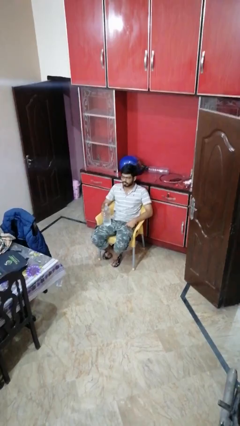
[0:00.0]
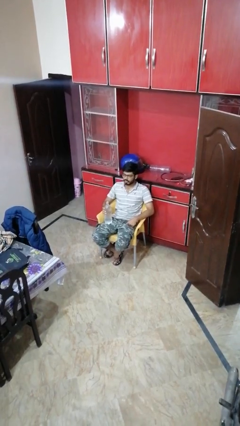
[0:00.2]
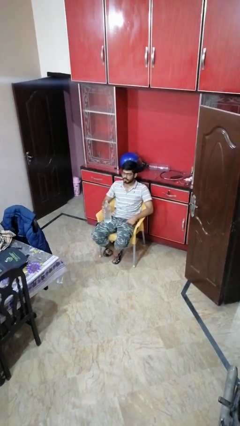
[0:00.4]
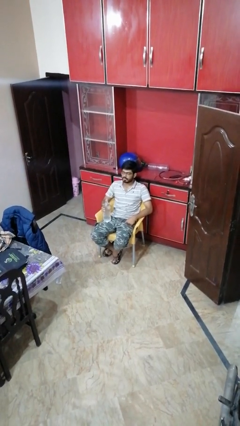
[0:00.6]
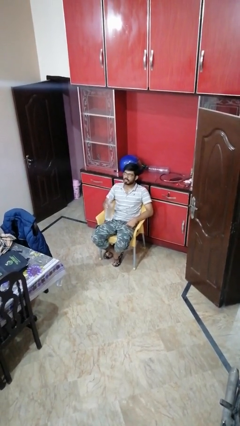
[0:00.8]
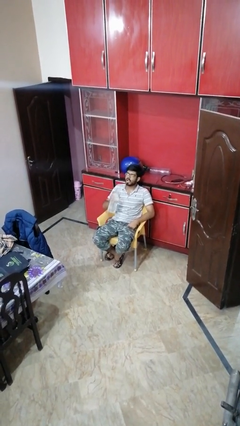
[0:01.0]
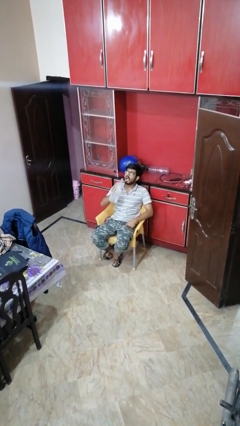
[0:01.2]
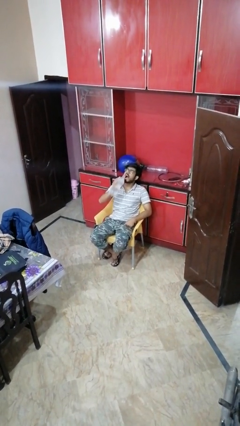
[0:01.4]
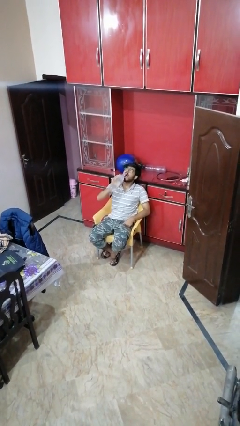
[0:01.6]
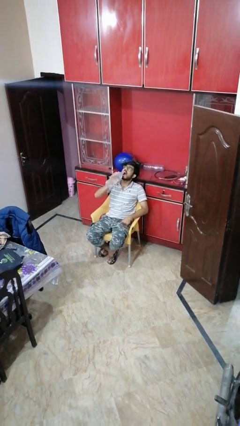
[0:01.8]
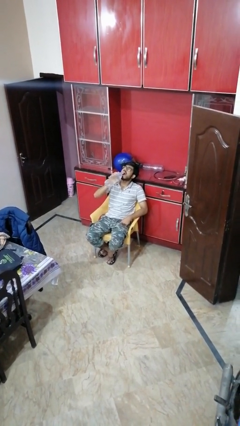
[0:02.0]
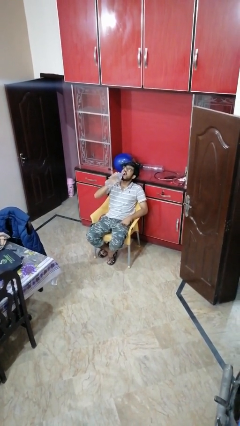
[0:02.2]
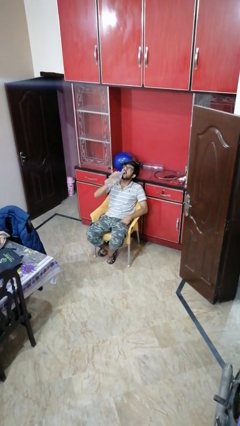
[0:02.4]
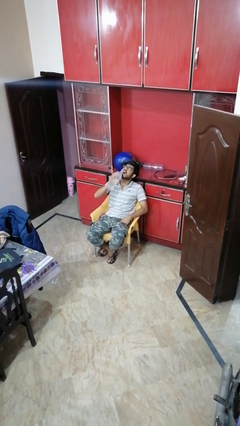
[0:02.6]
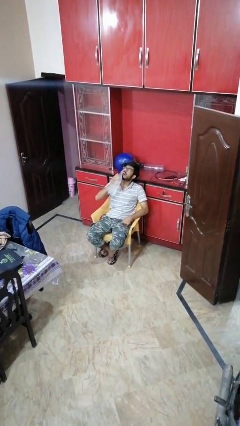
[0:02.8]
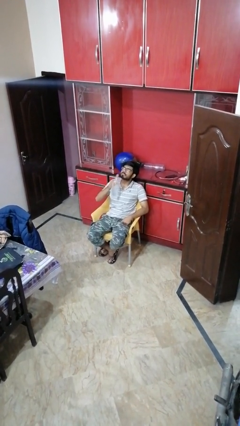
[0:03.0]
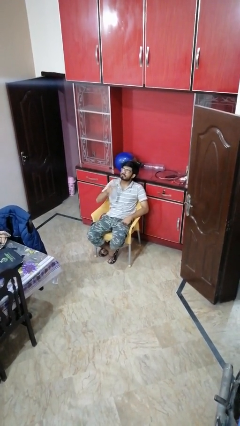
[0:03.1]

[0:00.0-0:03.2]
person drinks from bottle

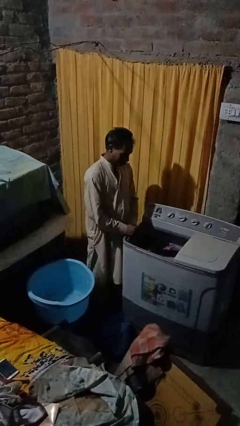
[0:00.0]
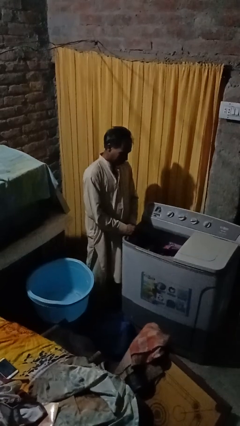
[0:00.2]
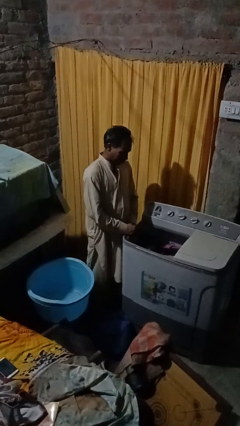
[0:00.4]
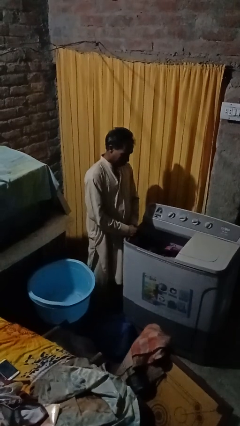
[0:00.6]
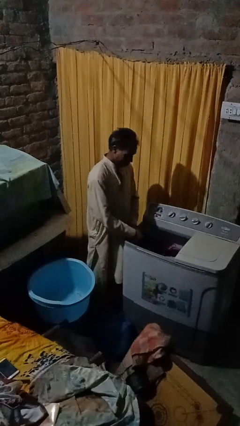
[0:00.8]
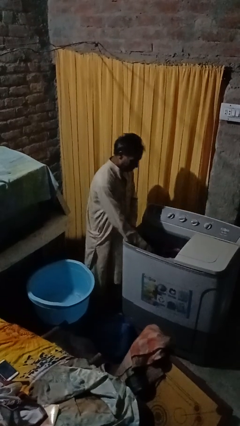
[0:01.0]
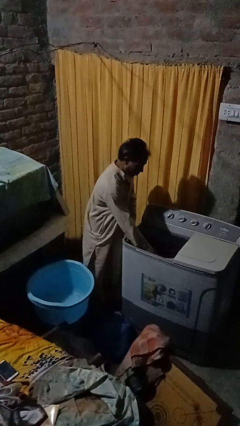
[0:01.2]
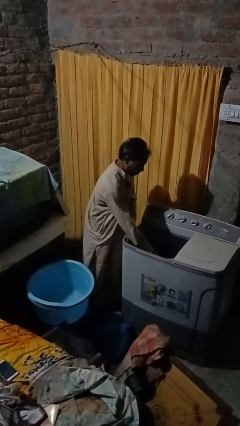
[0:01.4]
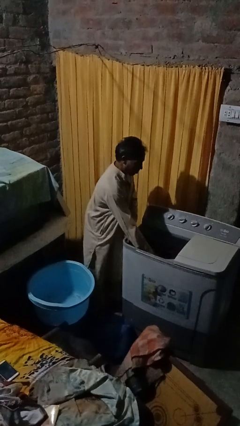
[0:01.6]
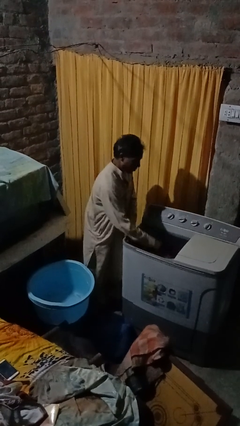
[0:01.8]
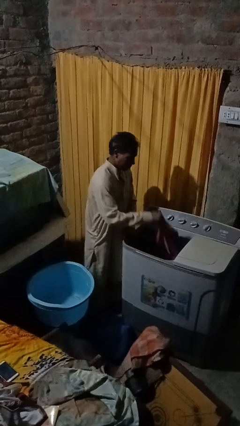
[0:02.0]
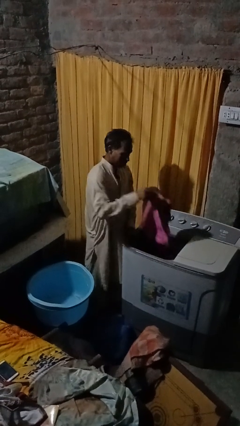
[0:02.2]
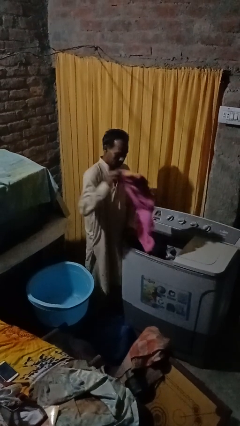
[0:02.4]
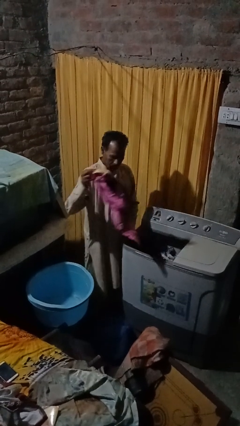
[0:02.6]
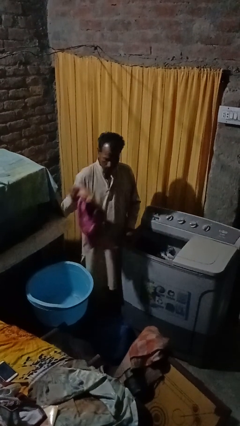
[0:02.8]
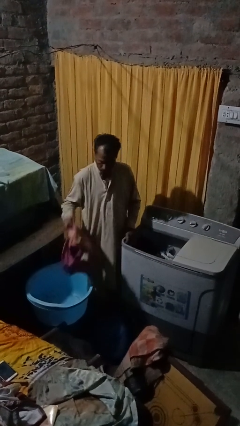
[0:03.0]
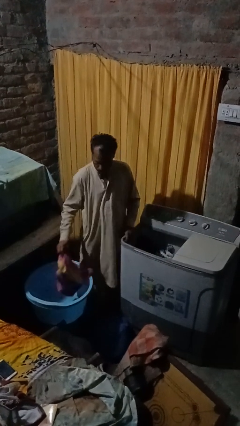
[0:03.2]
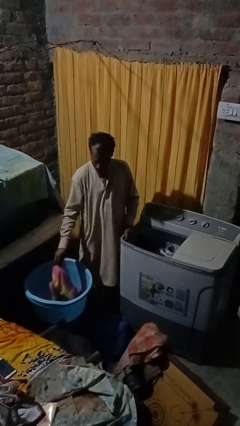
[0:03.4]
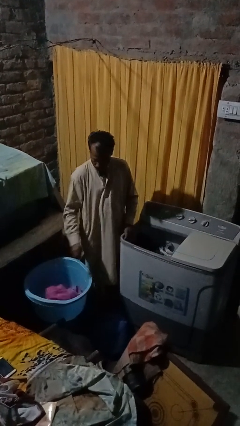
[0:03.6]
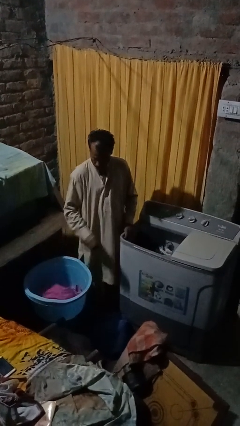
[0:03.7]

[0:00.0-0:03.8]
person unloads clotheswasher

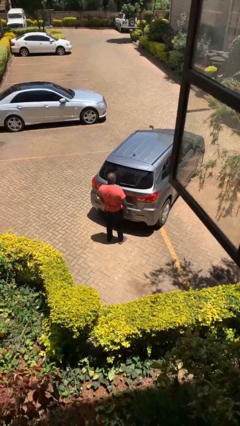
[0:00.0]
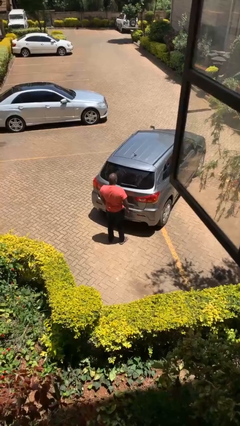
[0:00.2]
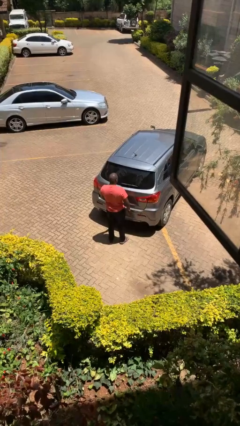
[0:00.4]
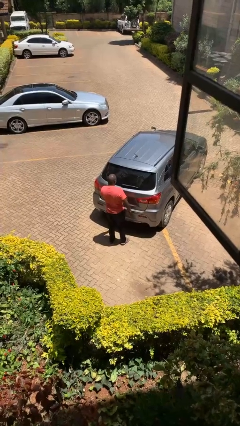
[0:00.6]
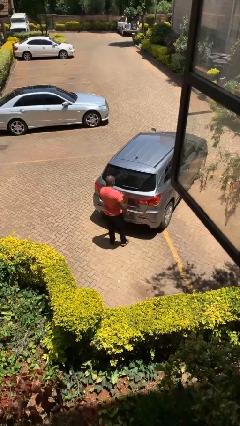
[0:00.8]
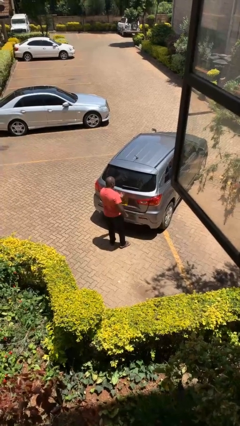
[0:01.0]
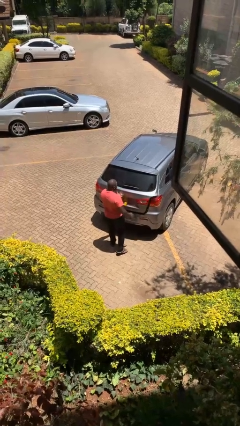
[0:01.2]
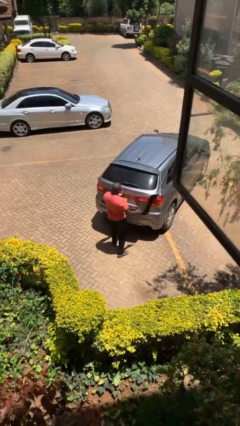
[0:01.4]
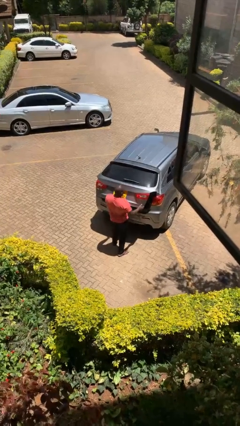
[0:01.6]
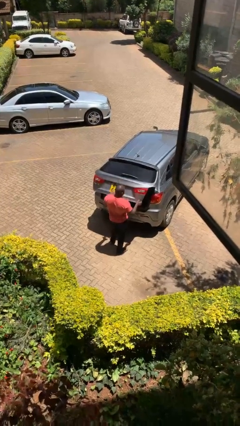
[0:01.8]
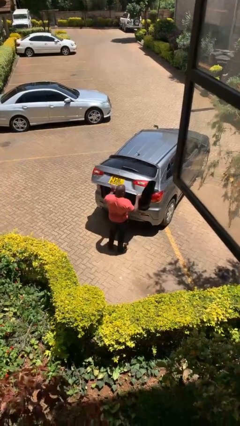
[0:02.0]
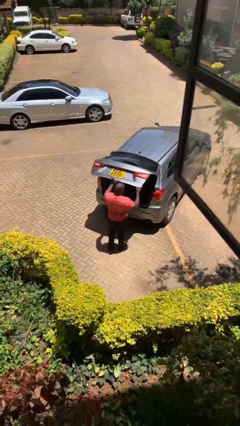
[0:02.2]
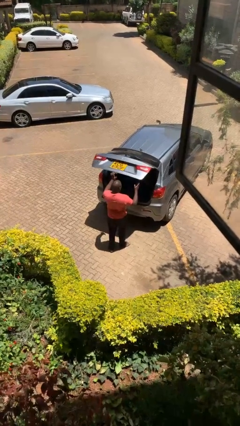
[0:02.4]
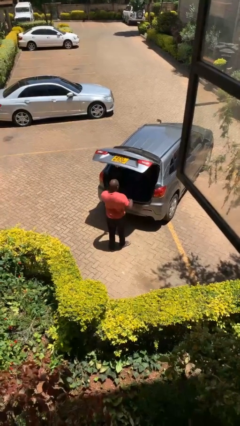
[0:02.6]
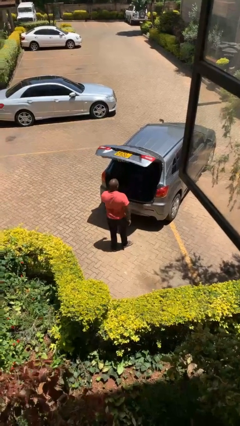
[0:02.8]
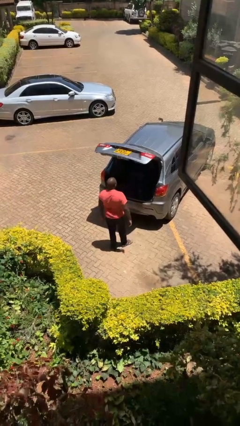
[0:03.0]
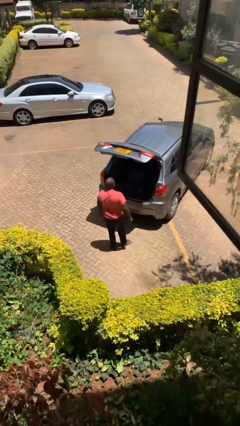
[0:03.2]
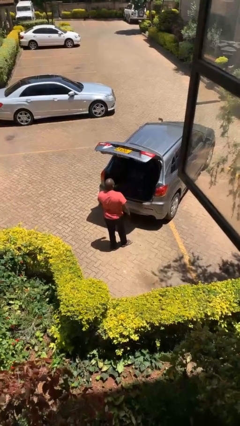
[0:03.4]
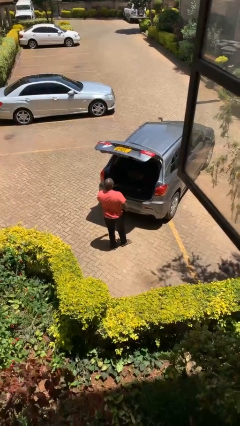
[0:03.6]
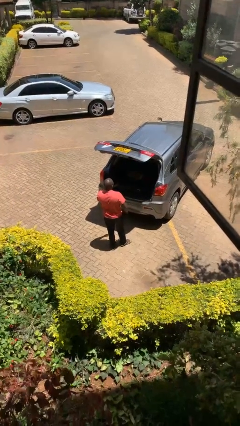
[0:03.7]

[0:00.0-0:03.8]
person opens car trunk

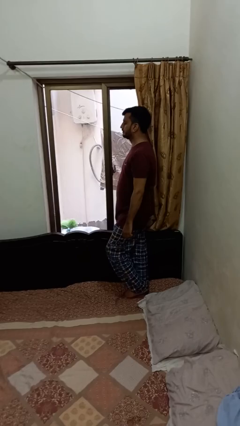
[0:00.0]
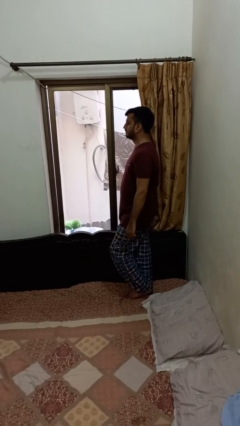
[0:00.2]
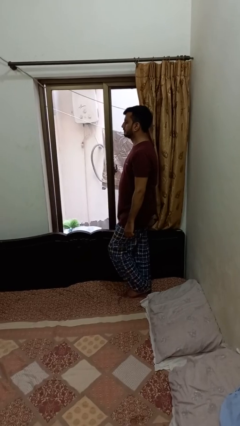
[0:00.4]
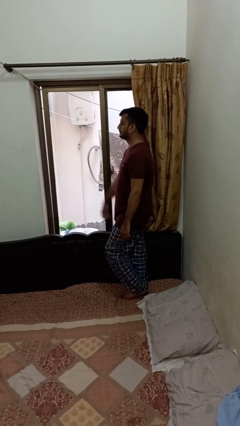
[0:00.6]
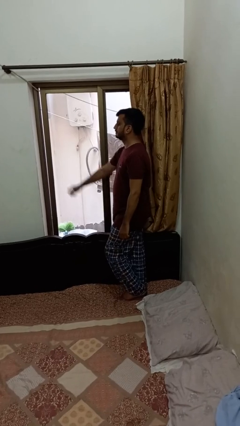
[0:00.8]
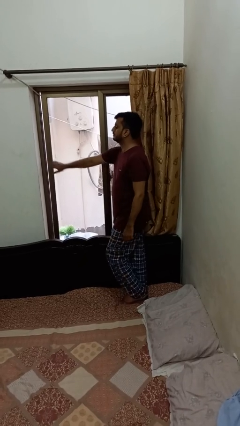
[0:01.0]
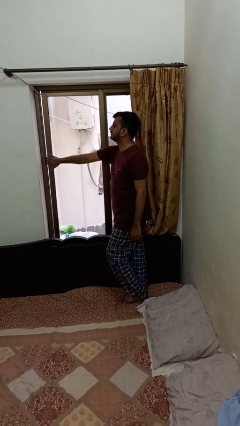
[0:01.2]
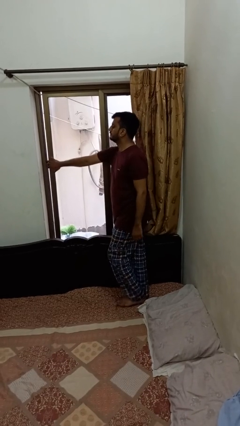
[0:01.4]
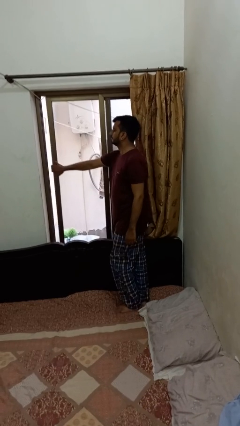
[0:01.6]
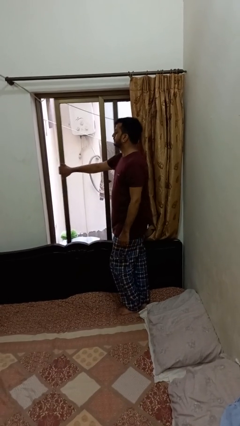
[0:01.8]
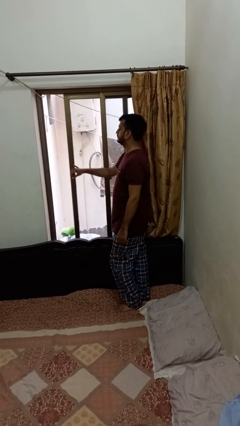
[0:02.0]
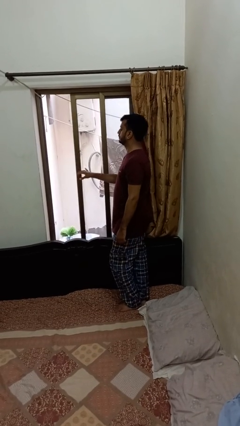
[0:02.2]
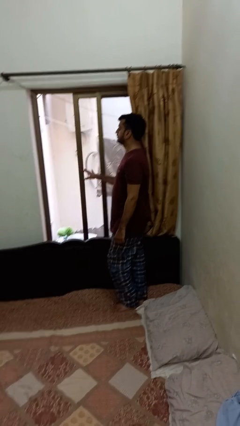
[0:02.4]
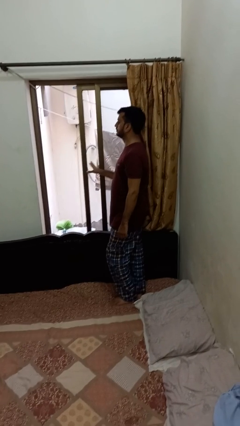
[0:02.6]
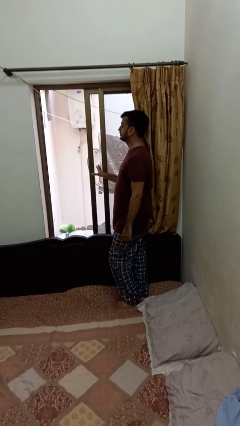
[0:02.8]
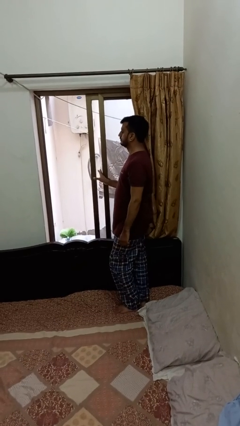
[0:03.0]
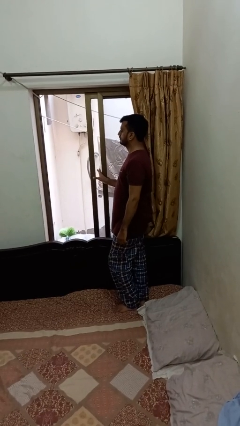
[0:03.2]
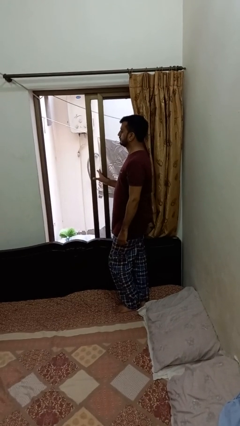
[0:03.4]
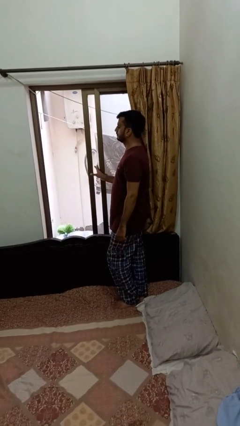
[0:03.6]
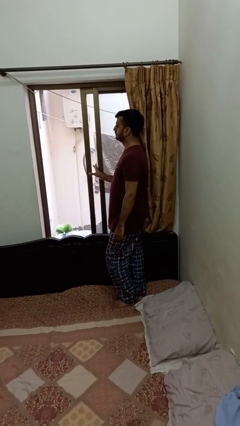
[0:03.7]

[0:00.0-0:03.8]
person opens home window

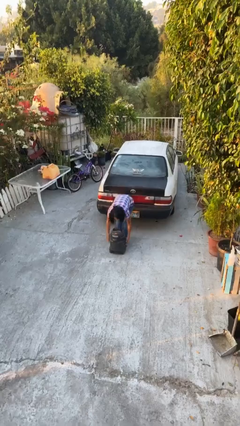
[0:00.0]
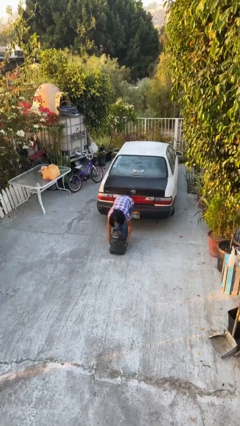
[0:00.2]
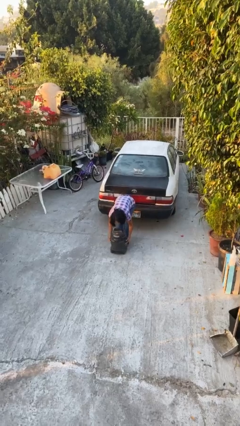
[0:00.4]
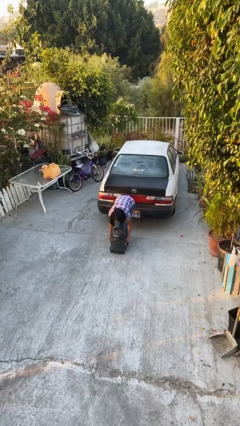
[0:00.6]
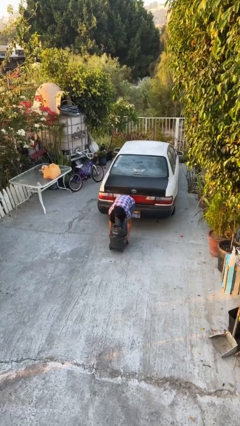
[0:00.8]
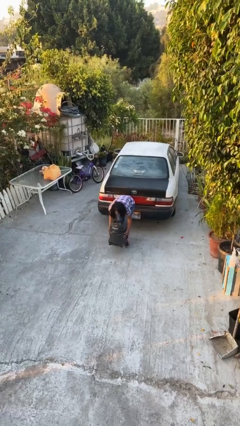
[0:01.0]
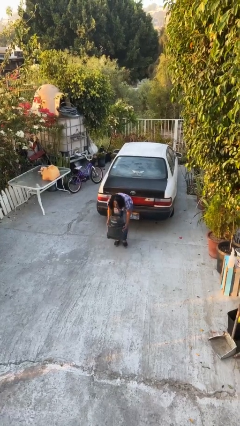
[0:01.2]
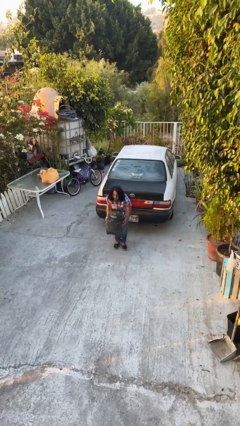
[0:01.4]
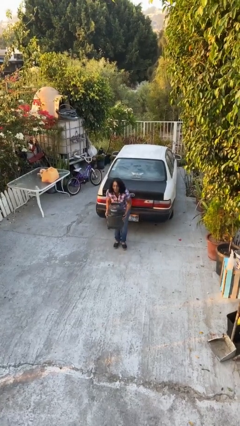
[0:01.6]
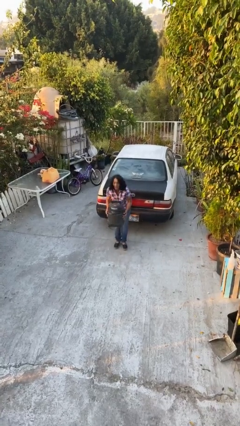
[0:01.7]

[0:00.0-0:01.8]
person picks up object from floor

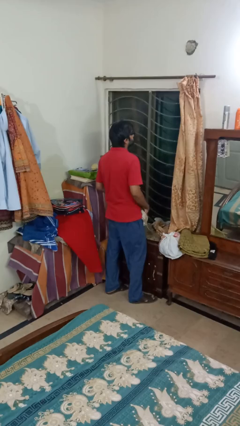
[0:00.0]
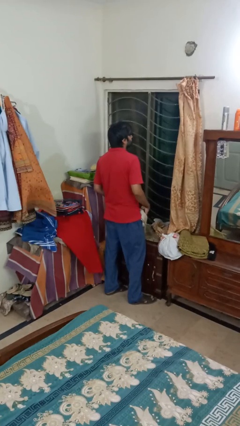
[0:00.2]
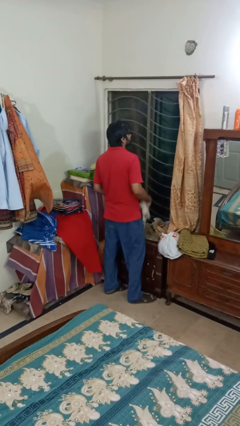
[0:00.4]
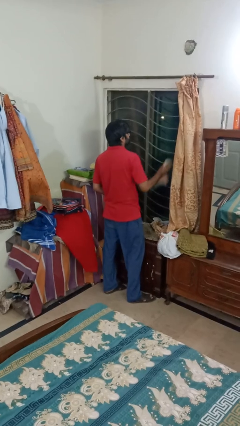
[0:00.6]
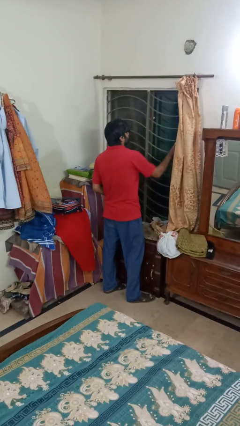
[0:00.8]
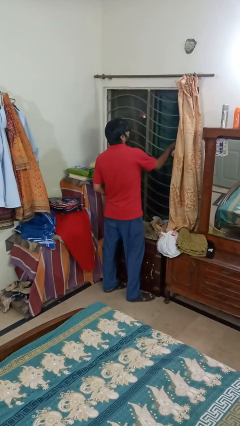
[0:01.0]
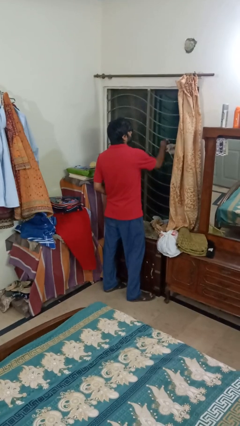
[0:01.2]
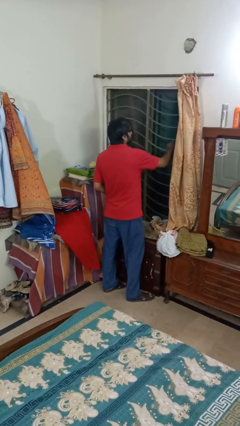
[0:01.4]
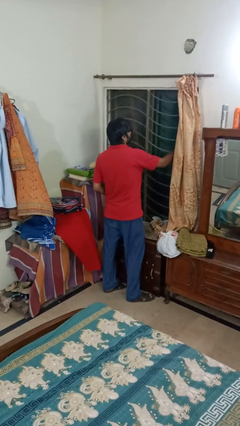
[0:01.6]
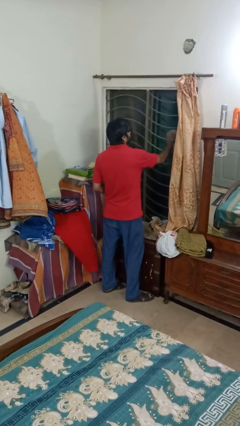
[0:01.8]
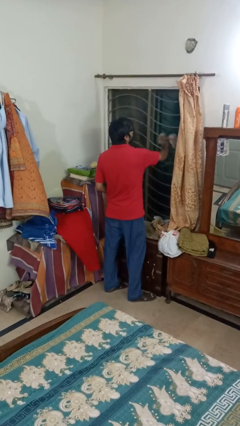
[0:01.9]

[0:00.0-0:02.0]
person washes window
